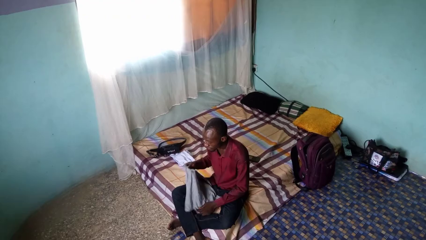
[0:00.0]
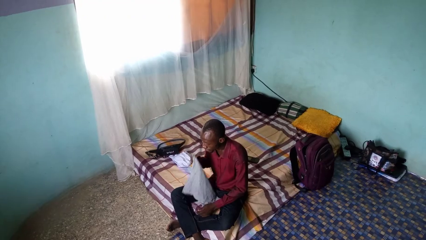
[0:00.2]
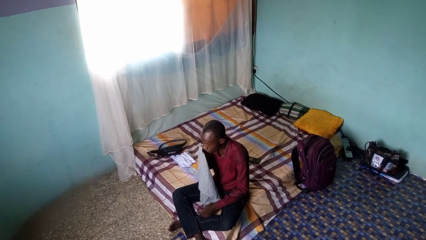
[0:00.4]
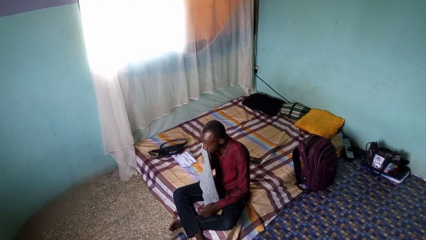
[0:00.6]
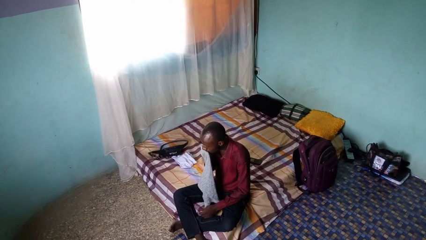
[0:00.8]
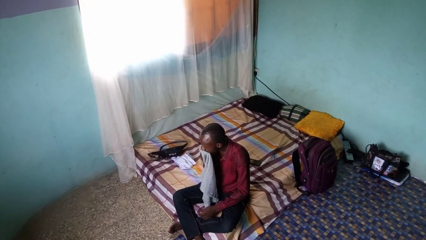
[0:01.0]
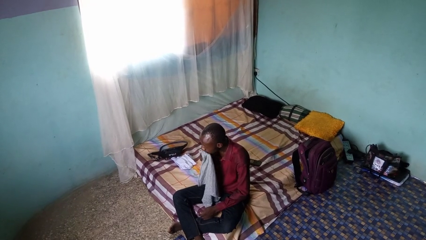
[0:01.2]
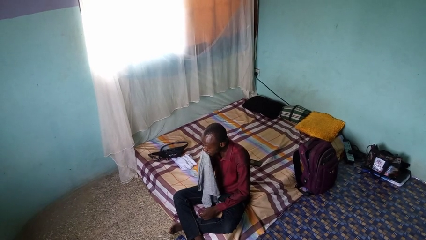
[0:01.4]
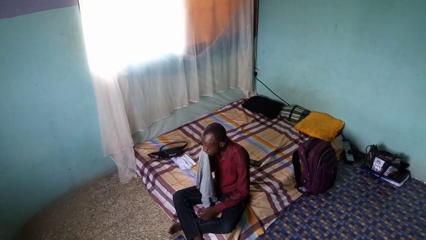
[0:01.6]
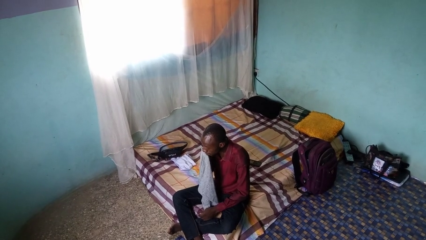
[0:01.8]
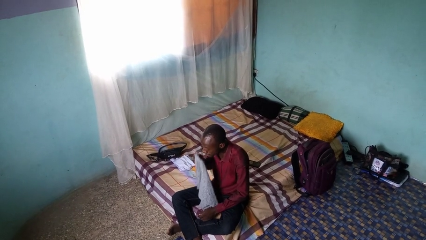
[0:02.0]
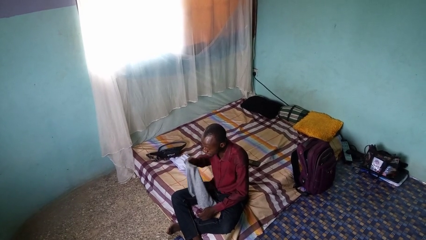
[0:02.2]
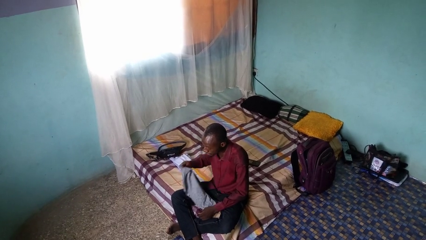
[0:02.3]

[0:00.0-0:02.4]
person wipes mouth with napkin

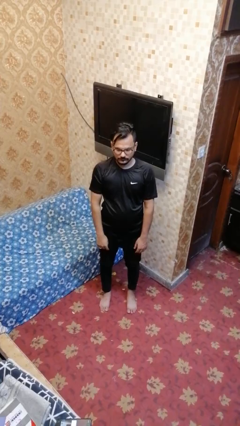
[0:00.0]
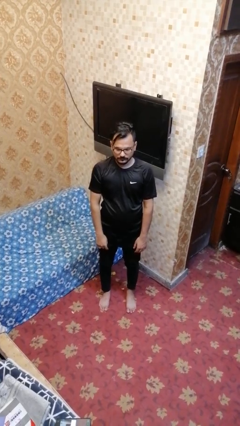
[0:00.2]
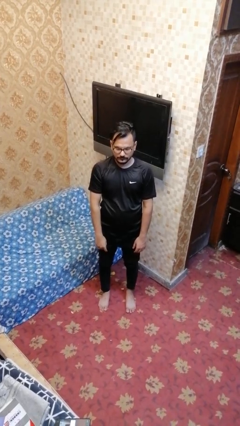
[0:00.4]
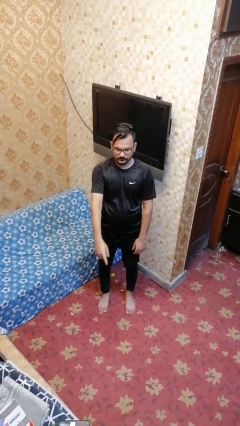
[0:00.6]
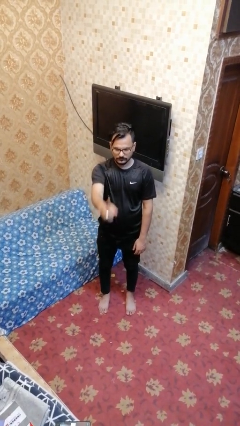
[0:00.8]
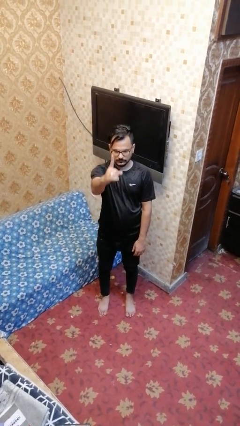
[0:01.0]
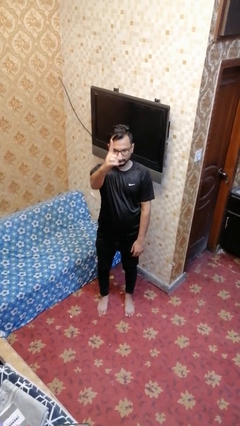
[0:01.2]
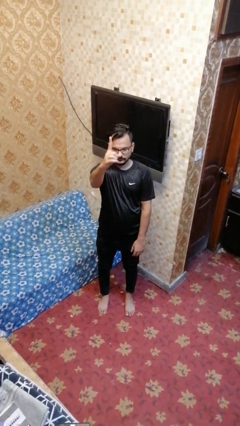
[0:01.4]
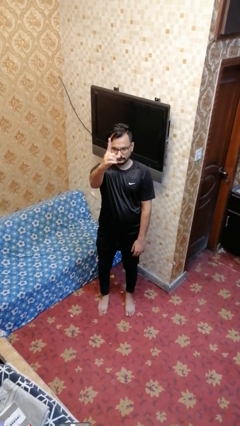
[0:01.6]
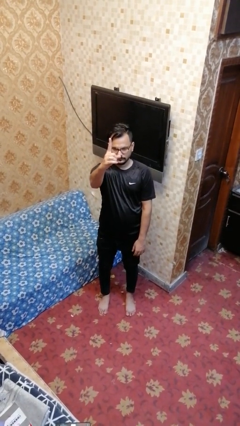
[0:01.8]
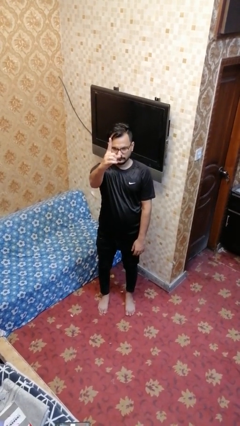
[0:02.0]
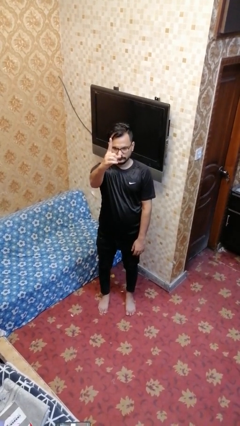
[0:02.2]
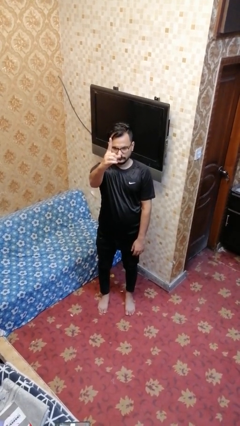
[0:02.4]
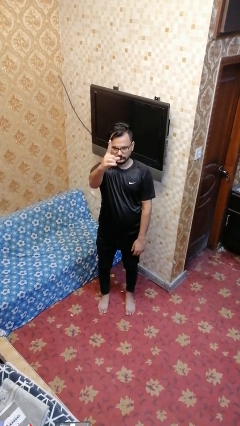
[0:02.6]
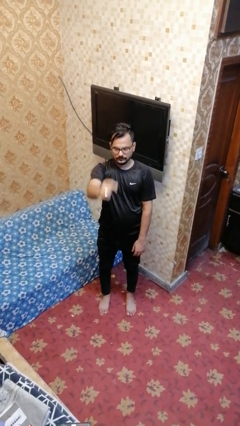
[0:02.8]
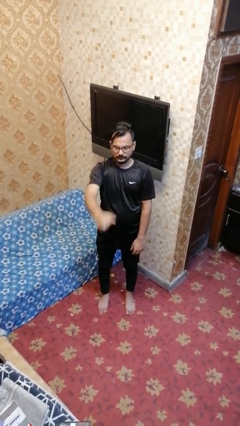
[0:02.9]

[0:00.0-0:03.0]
person gestures number one

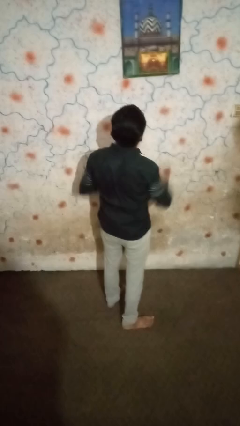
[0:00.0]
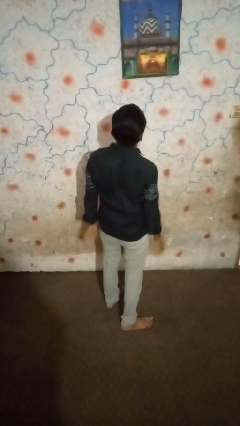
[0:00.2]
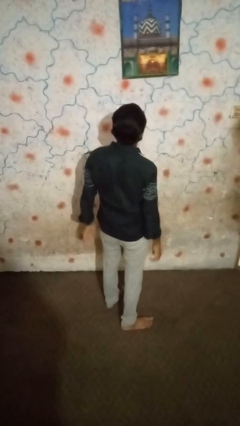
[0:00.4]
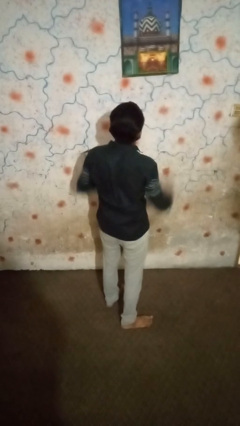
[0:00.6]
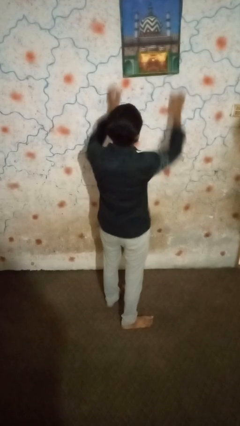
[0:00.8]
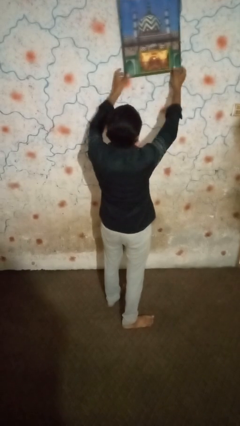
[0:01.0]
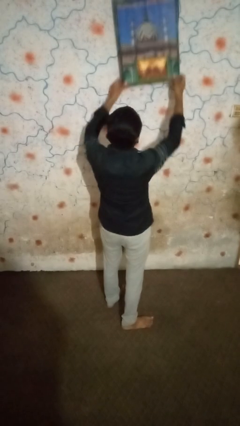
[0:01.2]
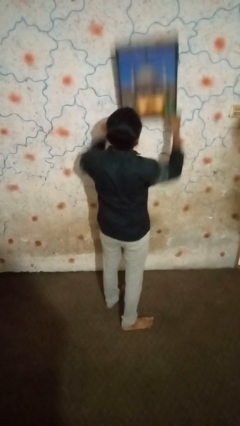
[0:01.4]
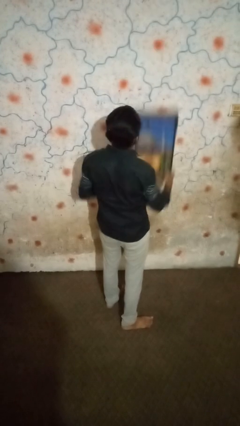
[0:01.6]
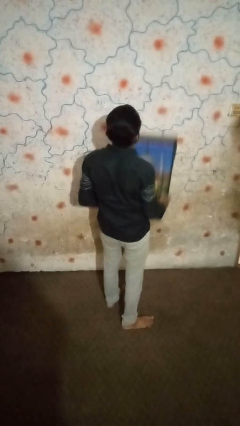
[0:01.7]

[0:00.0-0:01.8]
person takes down picture frame

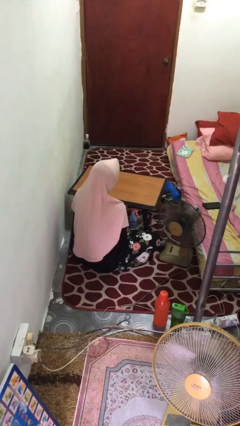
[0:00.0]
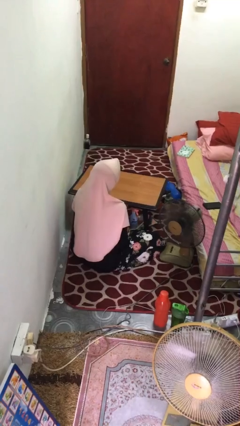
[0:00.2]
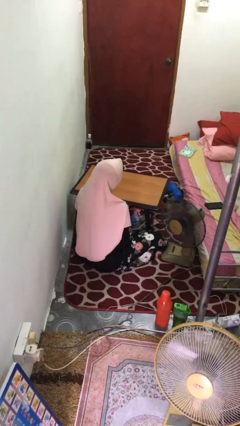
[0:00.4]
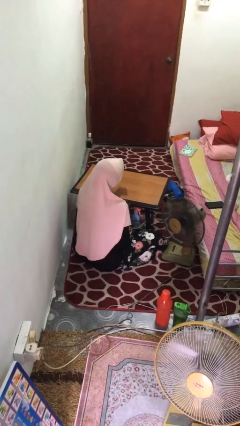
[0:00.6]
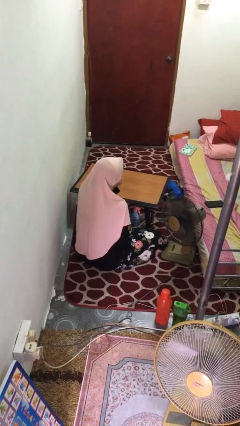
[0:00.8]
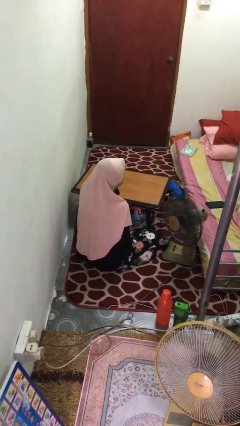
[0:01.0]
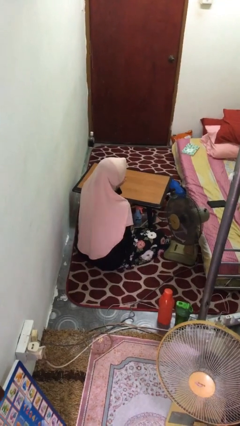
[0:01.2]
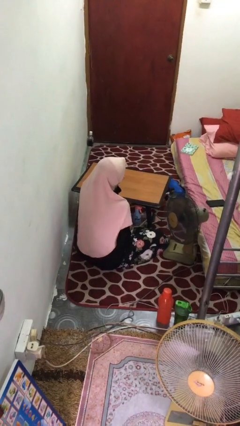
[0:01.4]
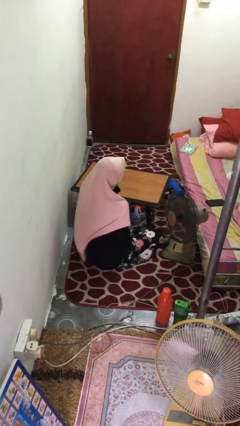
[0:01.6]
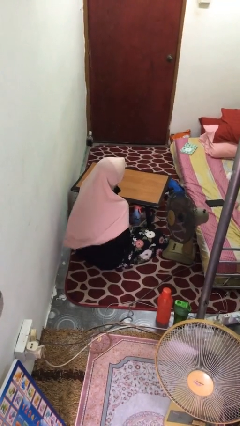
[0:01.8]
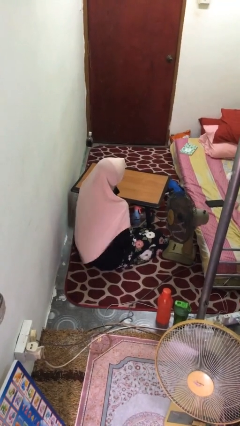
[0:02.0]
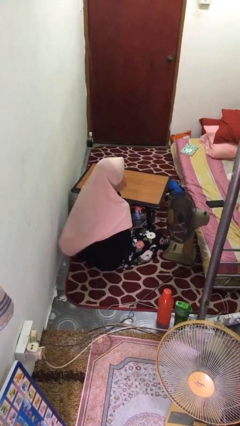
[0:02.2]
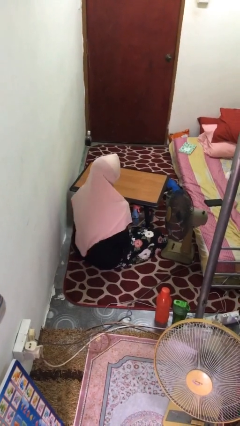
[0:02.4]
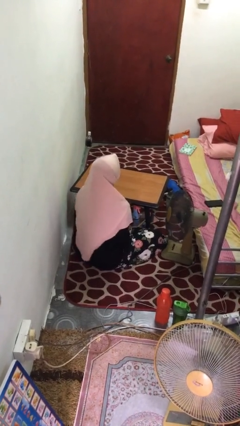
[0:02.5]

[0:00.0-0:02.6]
person licks fingers

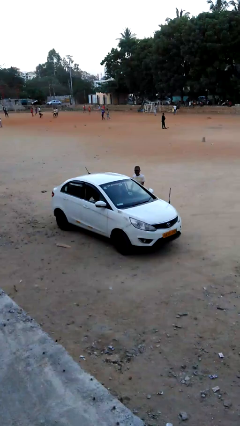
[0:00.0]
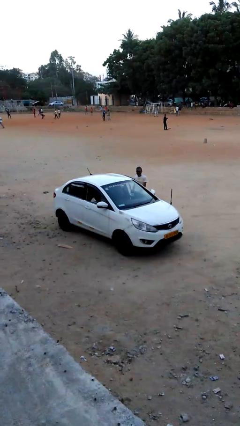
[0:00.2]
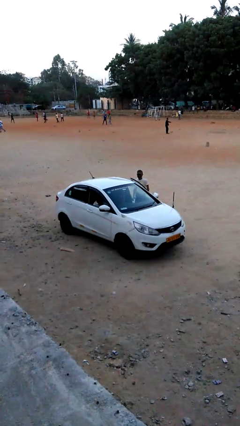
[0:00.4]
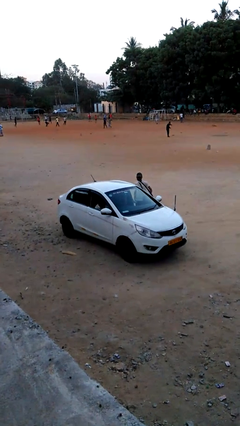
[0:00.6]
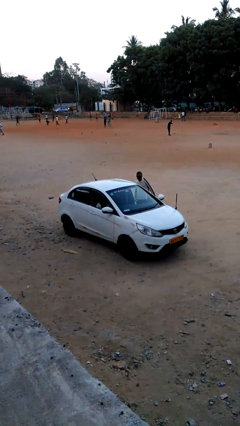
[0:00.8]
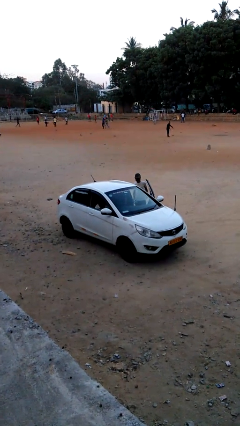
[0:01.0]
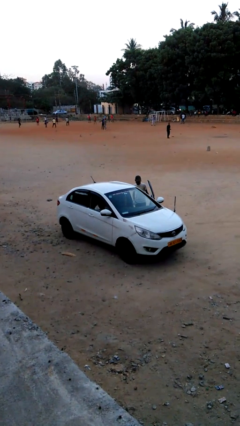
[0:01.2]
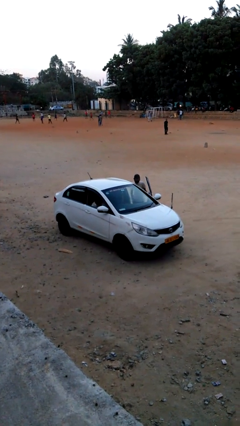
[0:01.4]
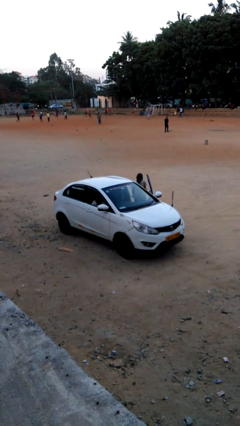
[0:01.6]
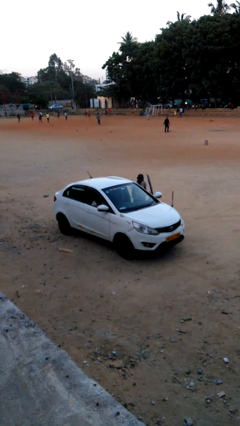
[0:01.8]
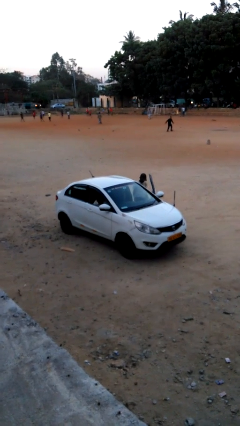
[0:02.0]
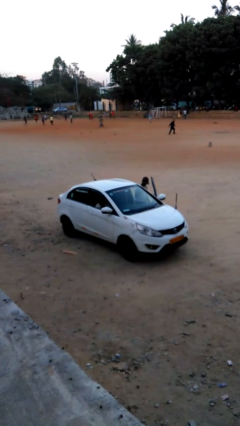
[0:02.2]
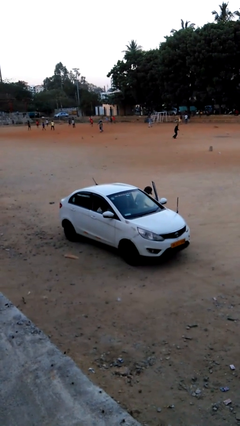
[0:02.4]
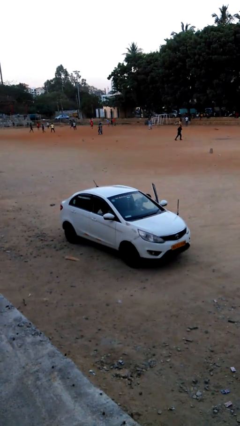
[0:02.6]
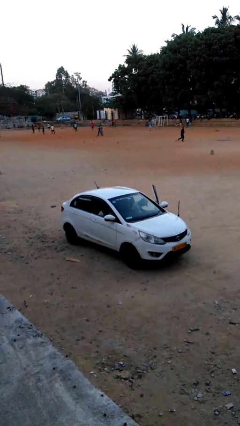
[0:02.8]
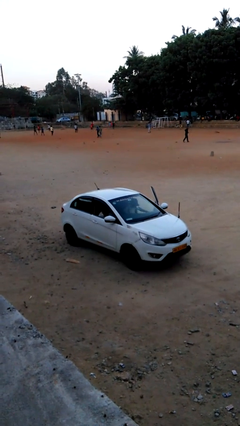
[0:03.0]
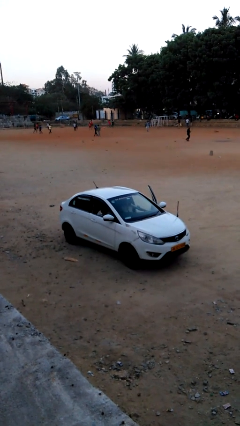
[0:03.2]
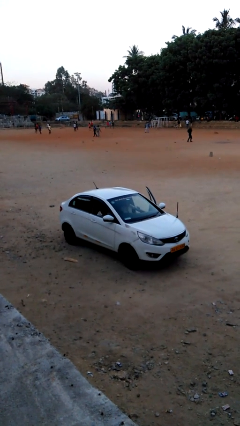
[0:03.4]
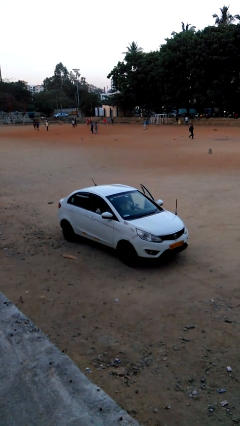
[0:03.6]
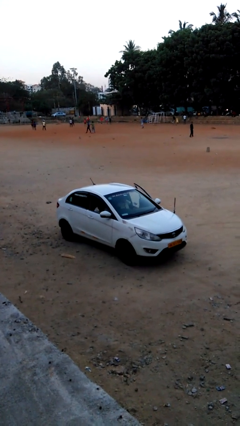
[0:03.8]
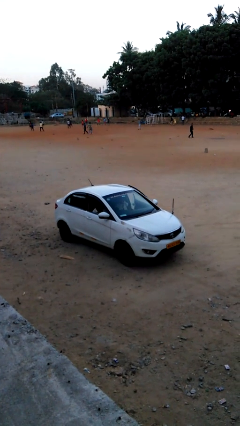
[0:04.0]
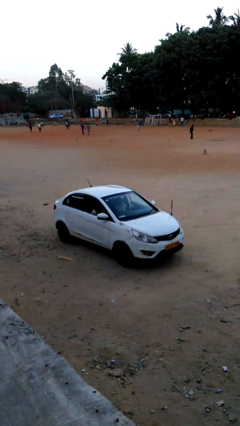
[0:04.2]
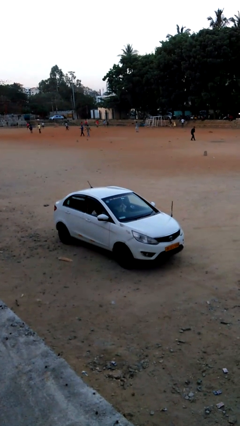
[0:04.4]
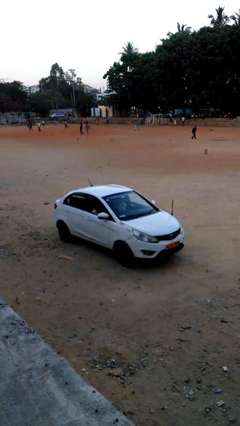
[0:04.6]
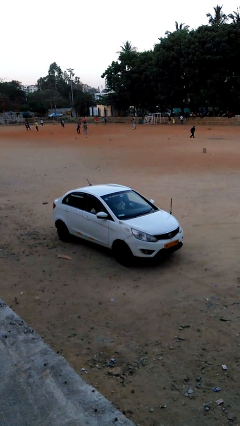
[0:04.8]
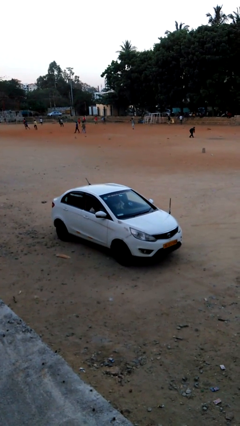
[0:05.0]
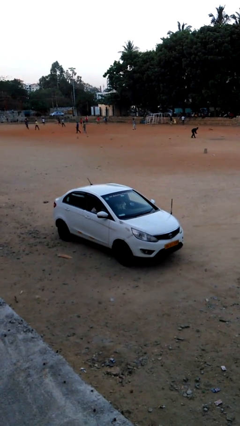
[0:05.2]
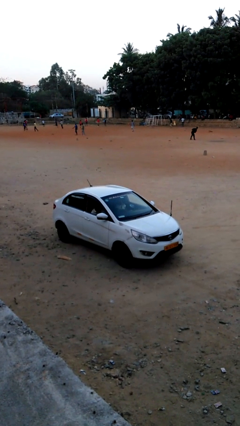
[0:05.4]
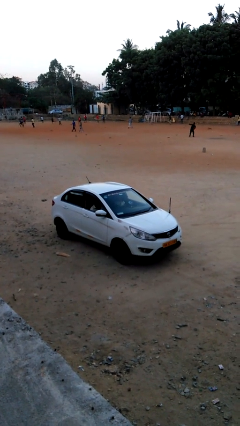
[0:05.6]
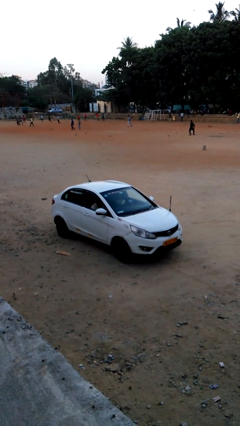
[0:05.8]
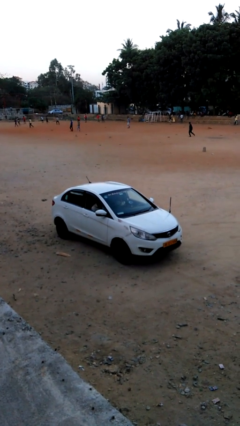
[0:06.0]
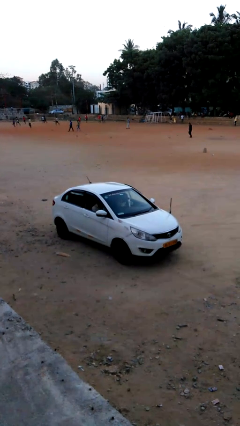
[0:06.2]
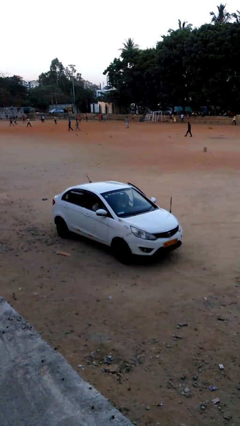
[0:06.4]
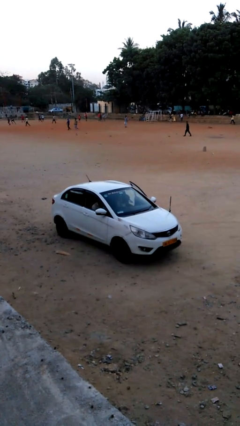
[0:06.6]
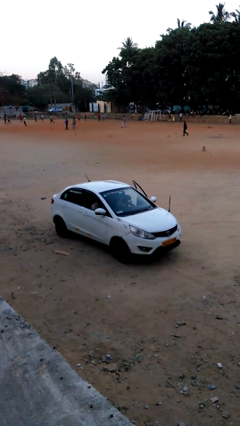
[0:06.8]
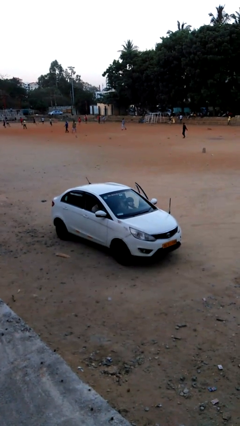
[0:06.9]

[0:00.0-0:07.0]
car picks up person

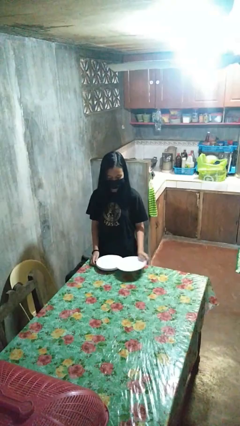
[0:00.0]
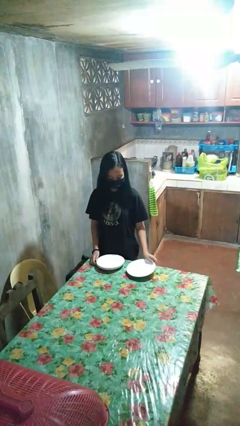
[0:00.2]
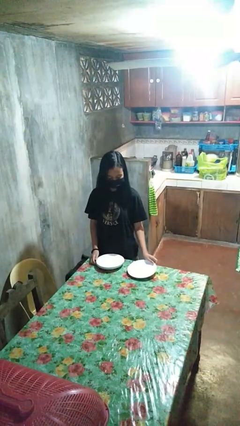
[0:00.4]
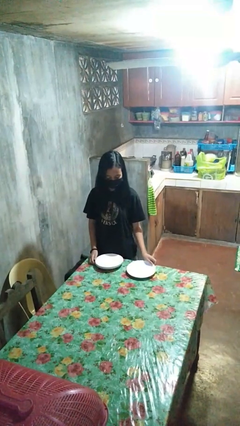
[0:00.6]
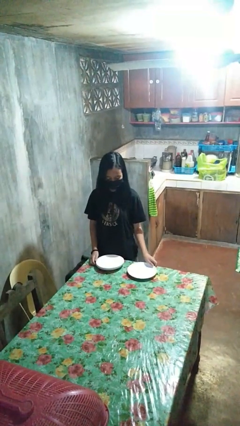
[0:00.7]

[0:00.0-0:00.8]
person sets table
